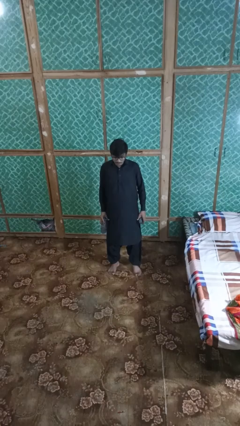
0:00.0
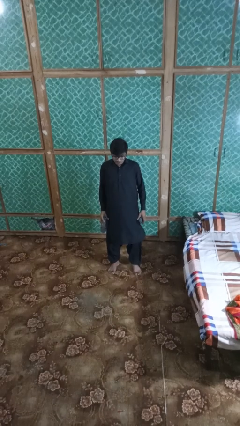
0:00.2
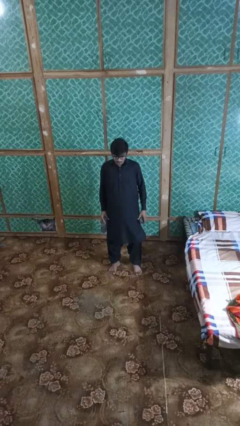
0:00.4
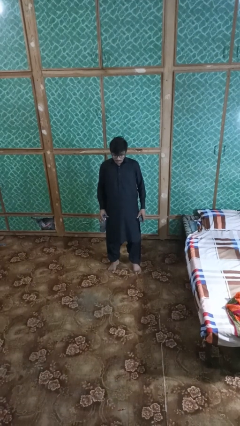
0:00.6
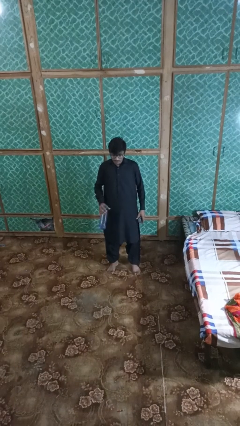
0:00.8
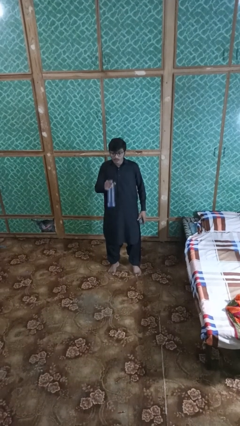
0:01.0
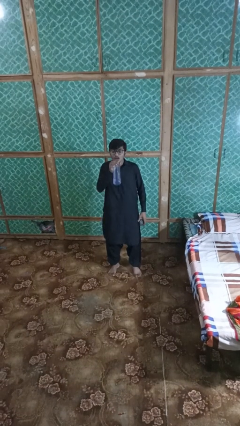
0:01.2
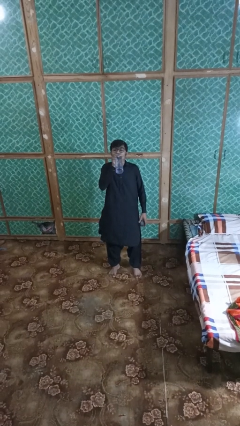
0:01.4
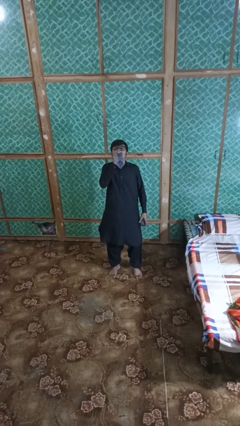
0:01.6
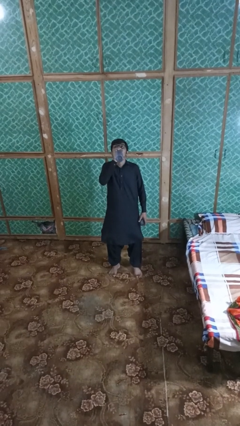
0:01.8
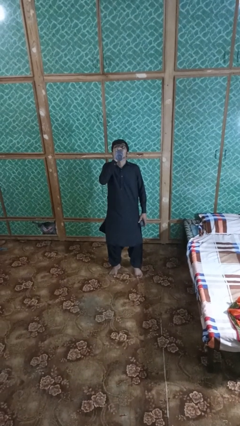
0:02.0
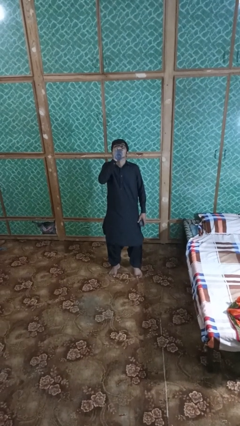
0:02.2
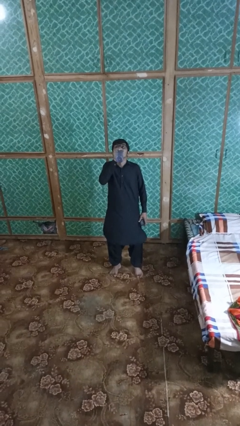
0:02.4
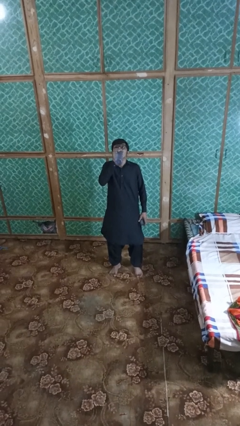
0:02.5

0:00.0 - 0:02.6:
person drinks from bottle

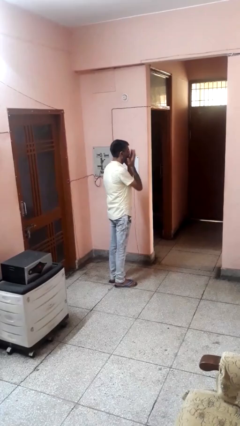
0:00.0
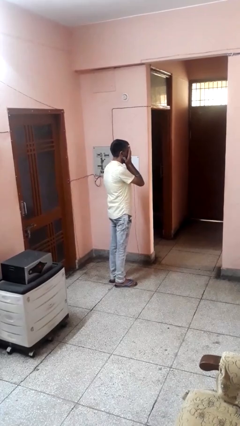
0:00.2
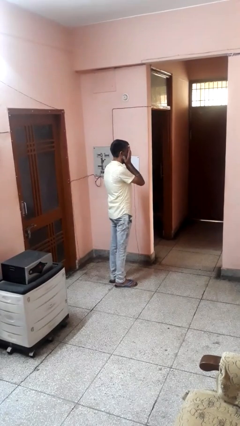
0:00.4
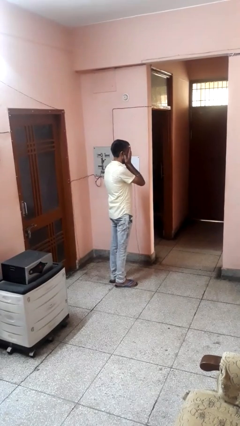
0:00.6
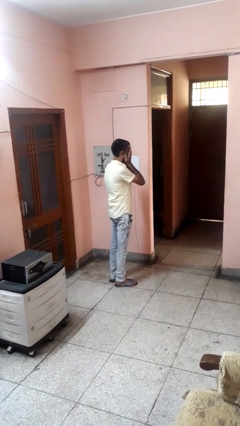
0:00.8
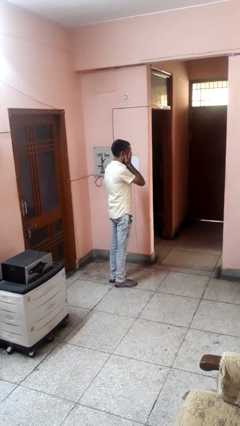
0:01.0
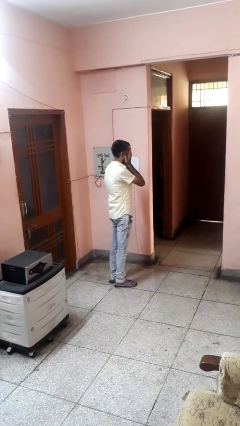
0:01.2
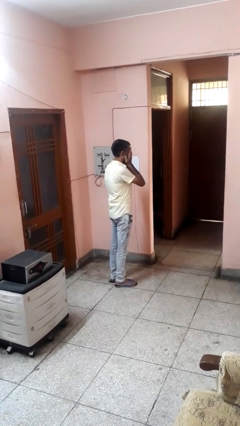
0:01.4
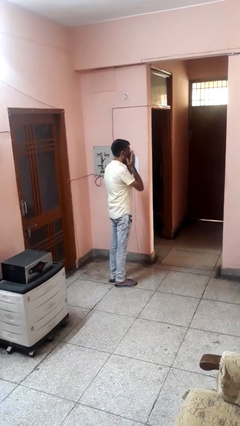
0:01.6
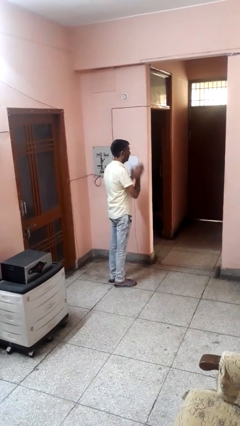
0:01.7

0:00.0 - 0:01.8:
person covers face with hands

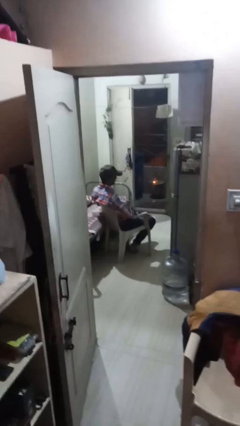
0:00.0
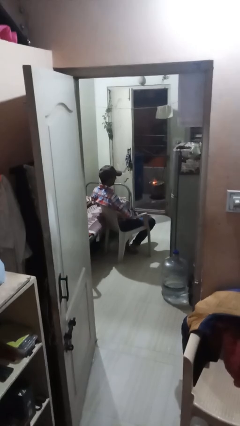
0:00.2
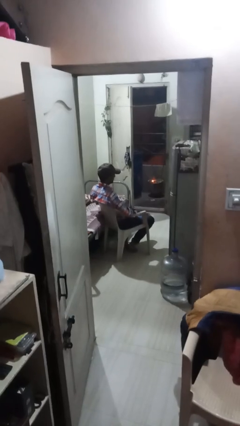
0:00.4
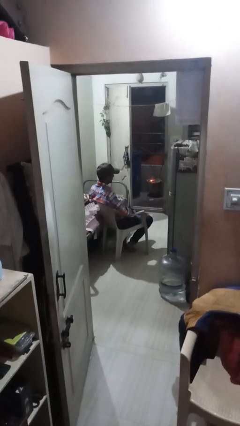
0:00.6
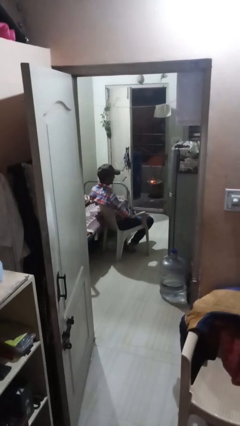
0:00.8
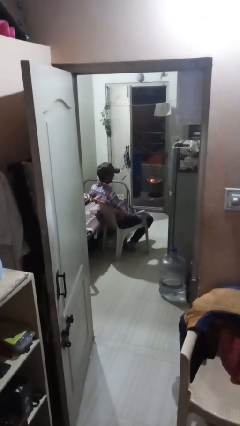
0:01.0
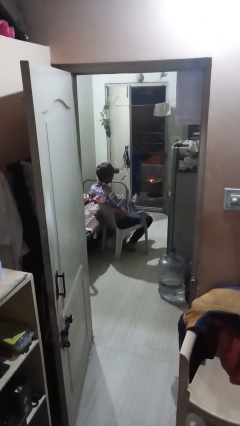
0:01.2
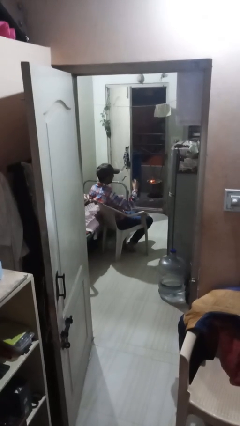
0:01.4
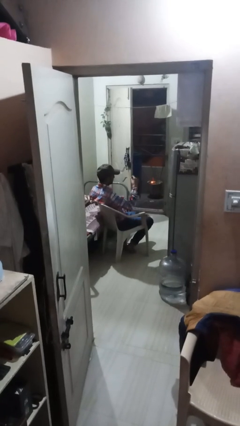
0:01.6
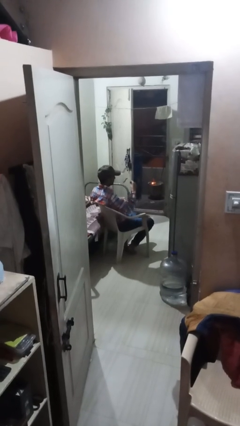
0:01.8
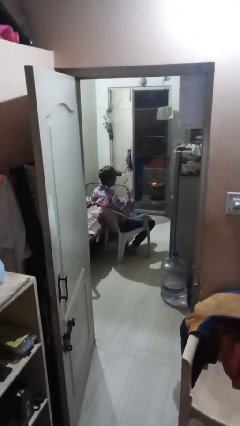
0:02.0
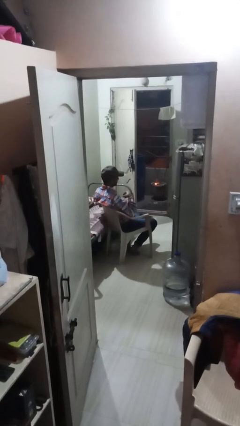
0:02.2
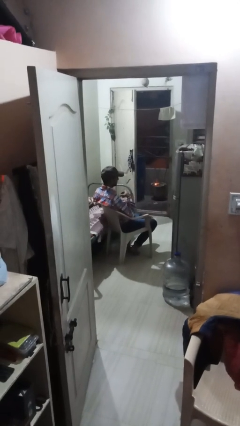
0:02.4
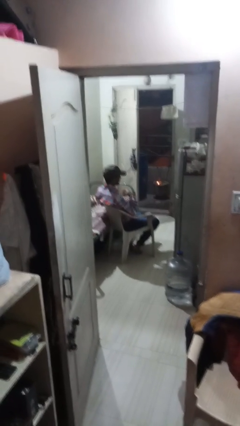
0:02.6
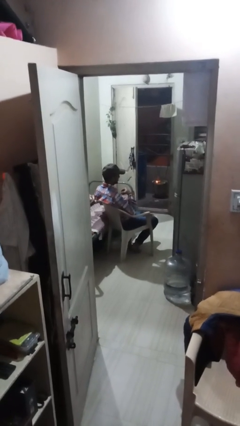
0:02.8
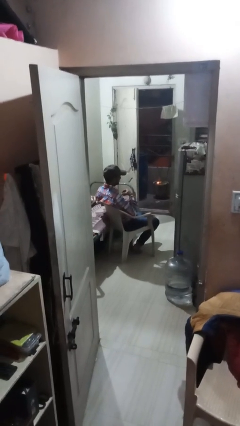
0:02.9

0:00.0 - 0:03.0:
person snaps fingers

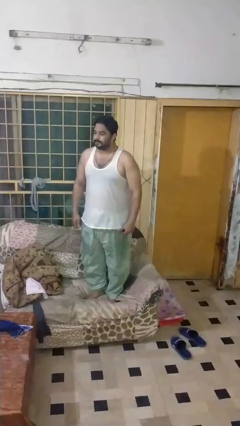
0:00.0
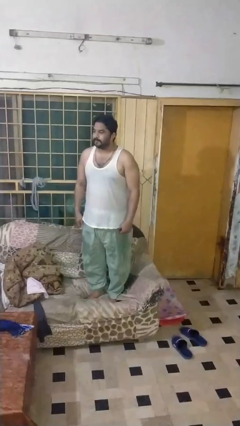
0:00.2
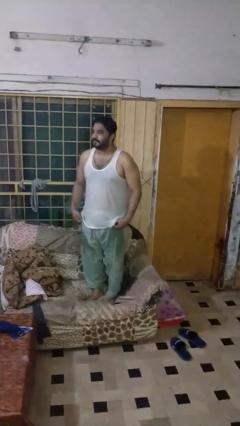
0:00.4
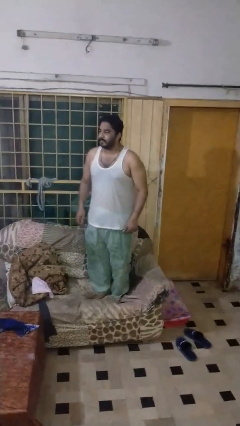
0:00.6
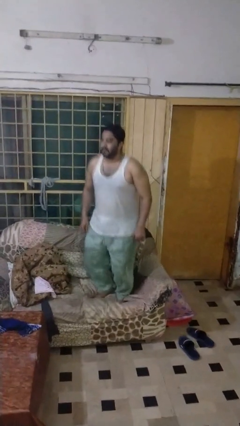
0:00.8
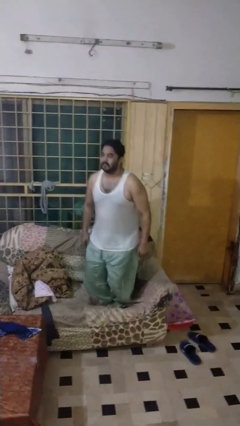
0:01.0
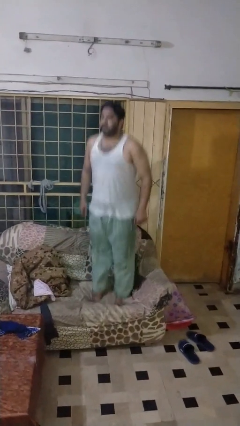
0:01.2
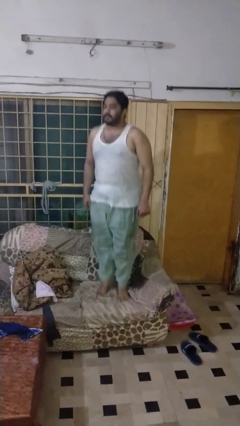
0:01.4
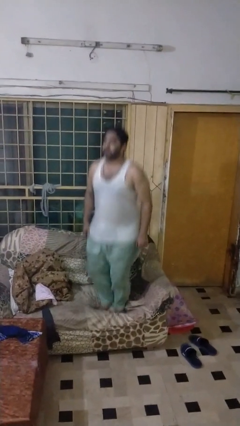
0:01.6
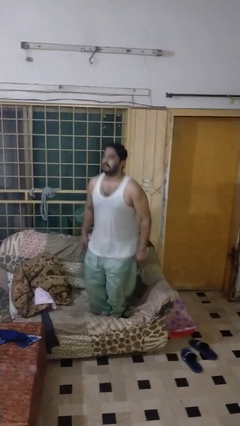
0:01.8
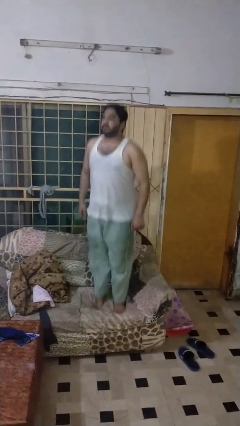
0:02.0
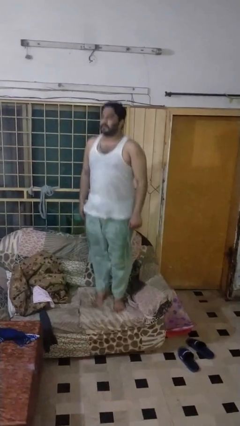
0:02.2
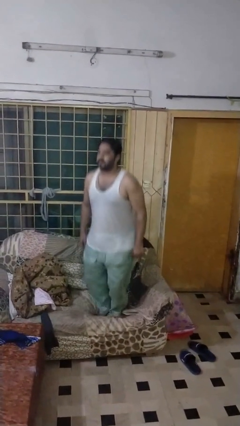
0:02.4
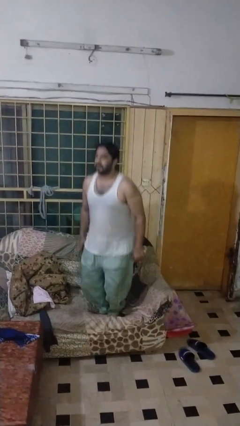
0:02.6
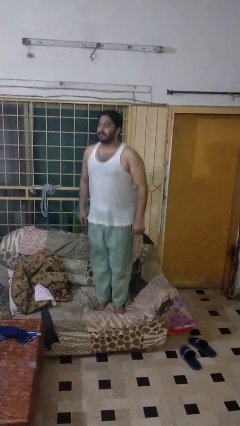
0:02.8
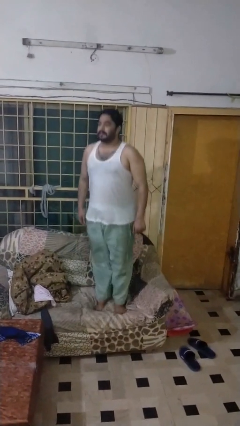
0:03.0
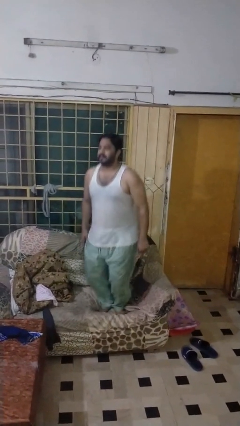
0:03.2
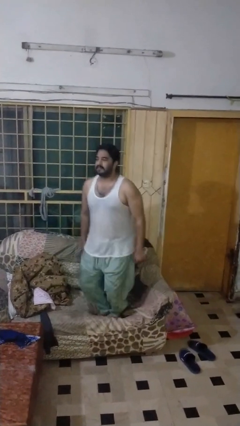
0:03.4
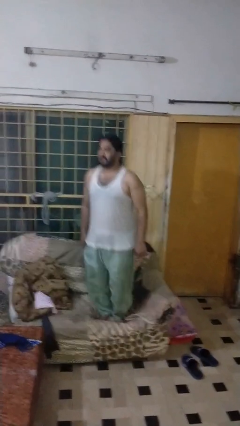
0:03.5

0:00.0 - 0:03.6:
person jumps on couch

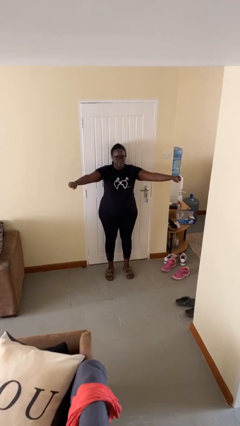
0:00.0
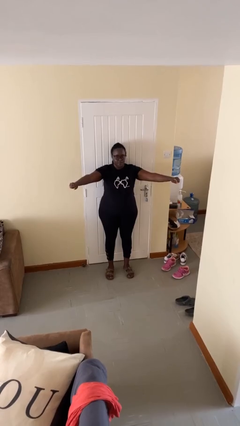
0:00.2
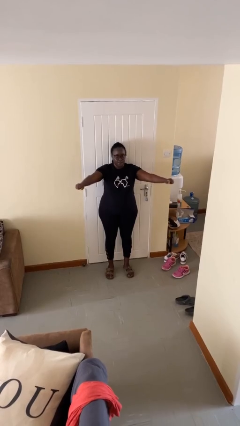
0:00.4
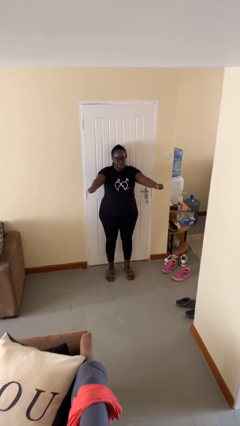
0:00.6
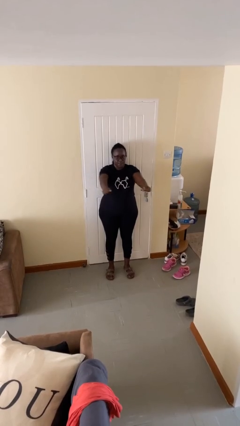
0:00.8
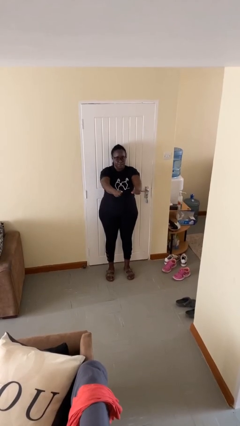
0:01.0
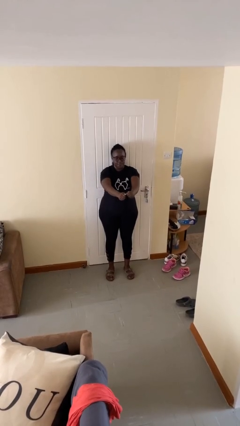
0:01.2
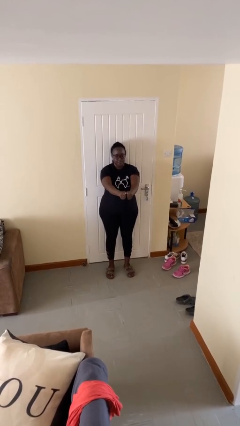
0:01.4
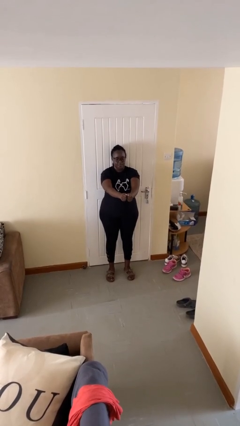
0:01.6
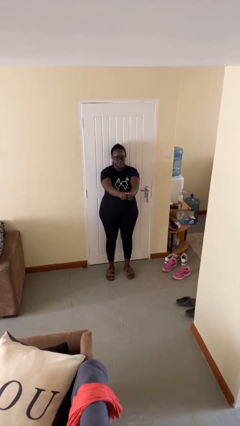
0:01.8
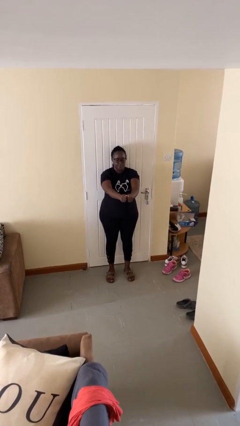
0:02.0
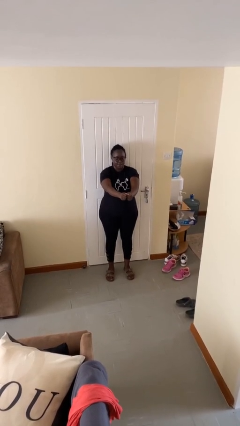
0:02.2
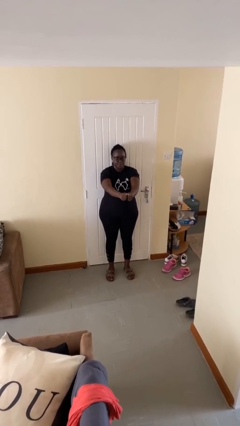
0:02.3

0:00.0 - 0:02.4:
person gestures zoom out

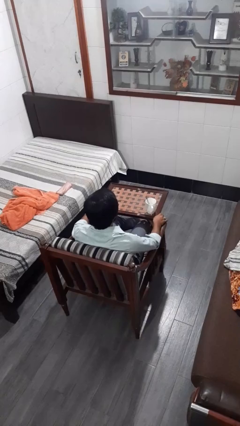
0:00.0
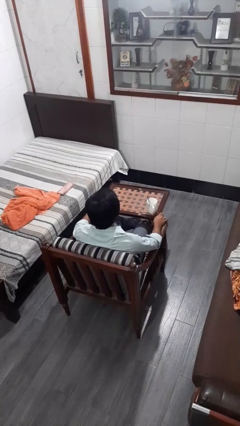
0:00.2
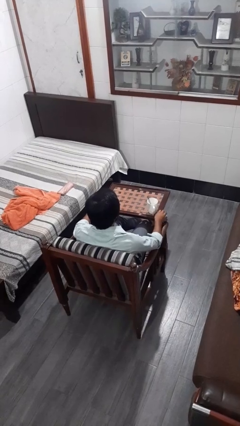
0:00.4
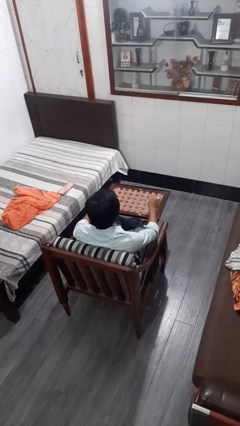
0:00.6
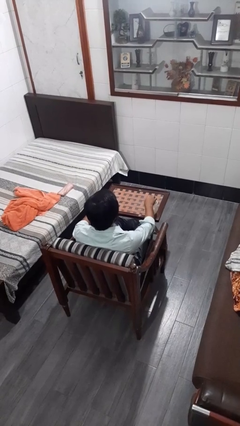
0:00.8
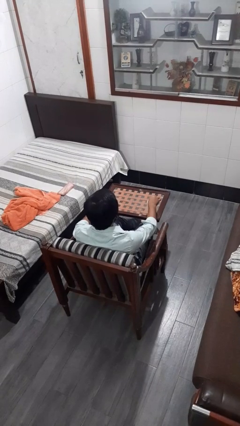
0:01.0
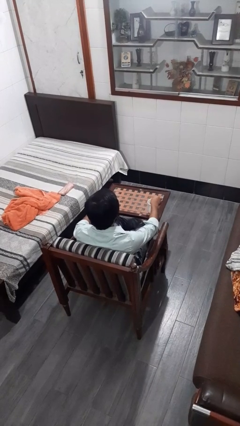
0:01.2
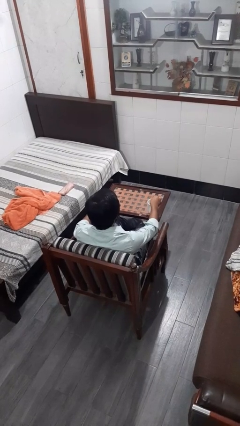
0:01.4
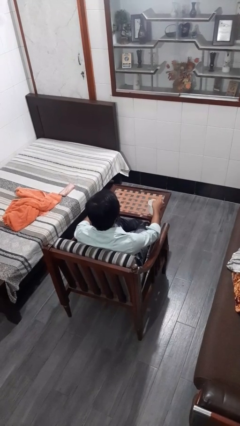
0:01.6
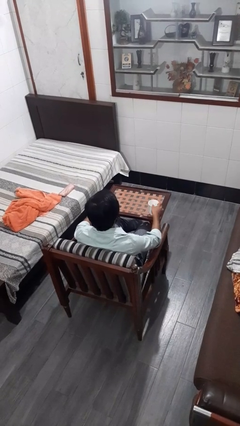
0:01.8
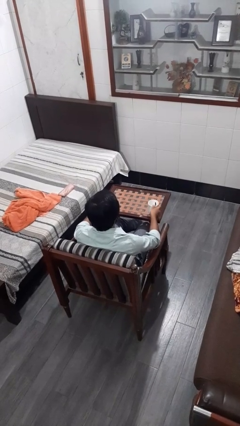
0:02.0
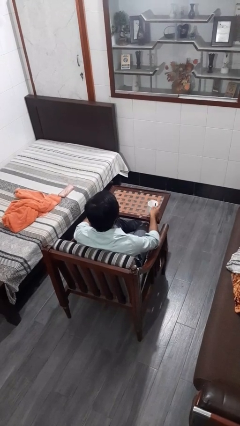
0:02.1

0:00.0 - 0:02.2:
person stirs mug

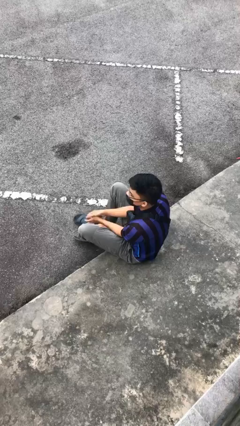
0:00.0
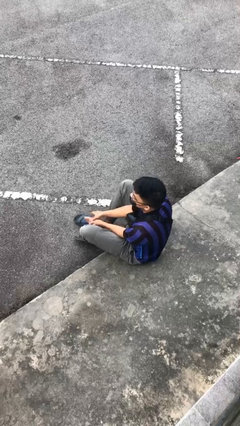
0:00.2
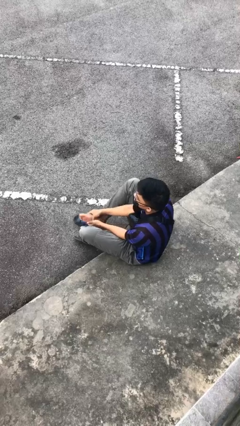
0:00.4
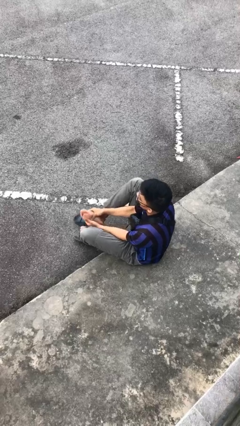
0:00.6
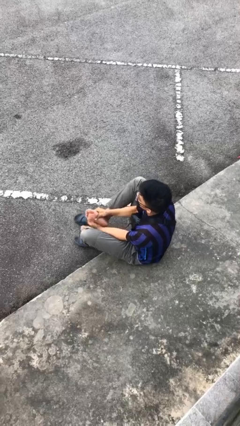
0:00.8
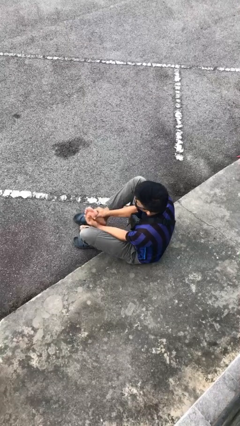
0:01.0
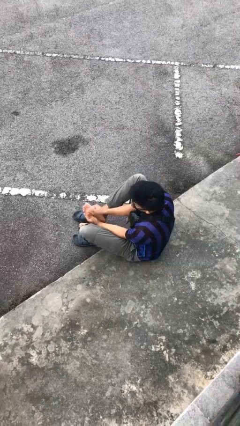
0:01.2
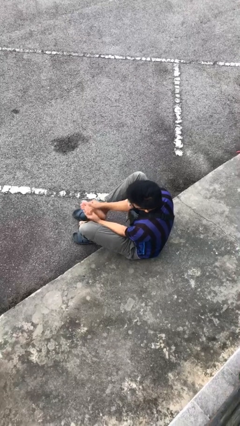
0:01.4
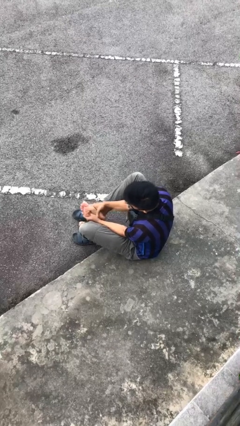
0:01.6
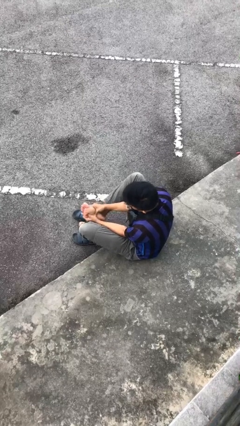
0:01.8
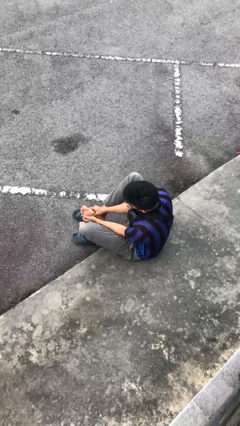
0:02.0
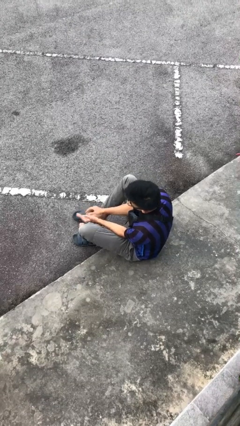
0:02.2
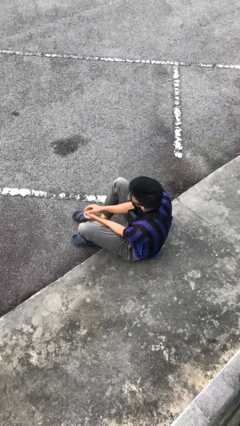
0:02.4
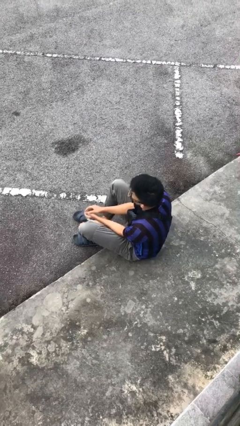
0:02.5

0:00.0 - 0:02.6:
person rubs foot
